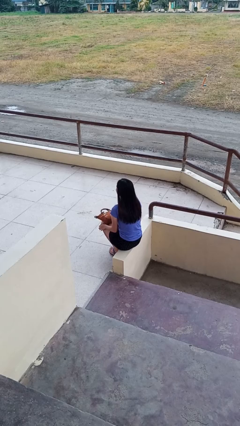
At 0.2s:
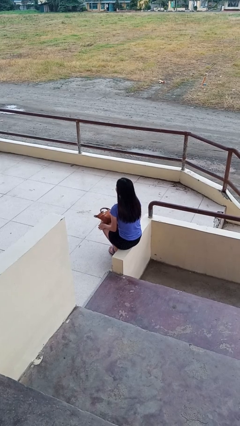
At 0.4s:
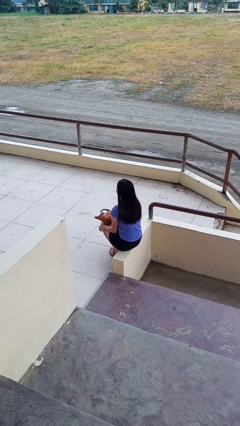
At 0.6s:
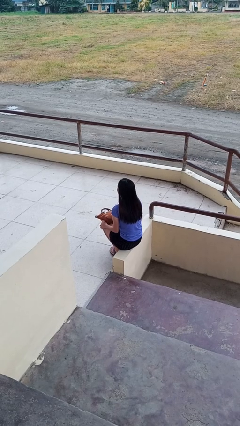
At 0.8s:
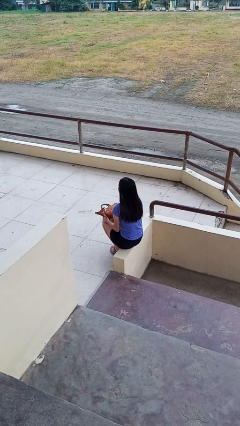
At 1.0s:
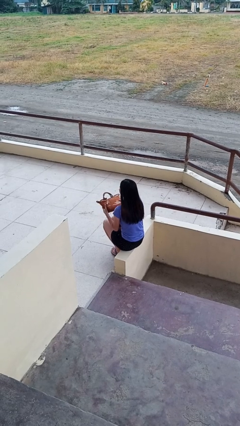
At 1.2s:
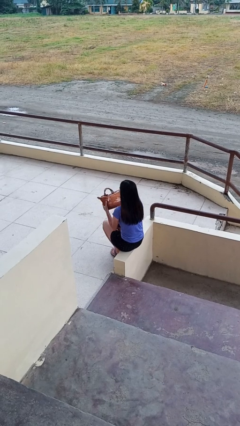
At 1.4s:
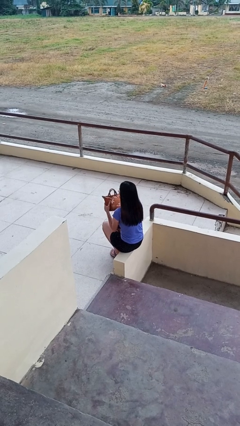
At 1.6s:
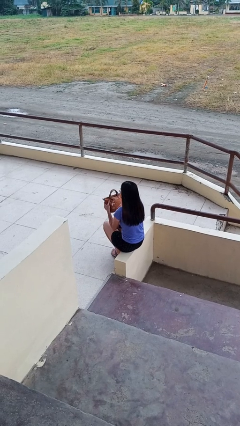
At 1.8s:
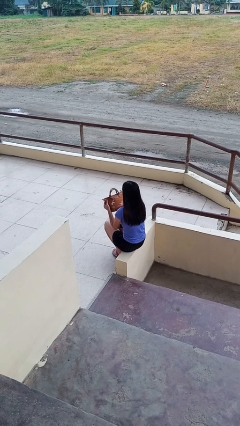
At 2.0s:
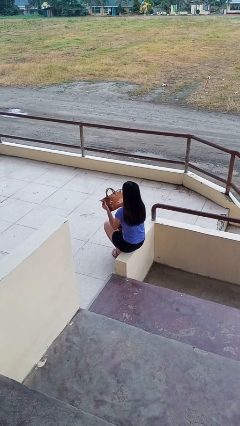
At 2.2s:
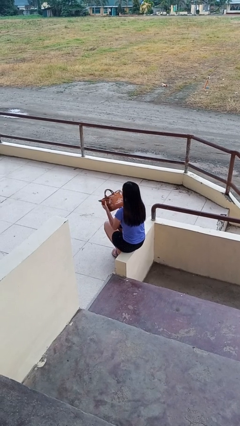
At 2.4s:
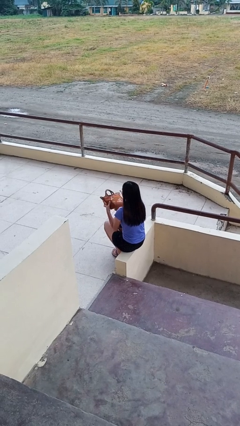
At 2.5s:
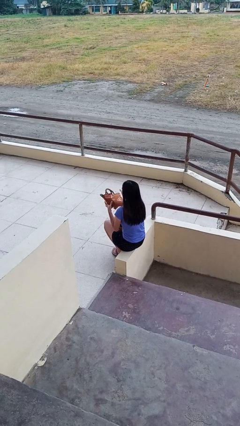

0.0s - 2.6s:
person taps object with finger

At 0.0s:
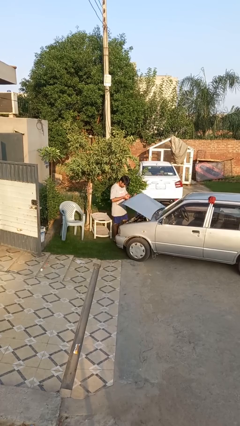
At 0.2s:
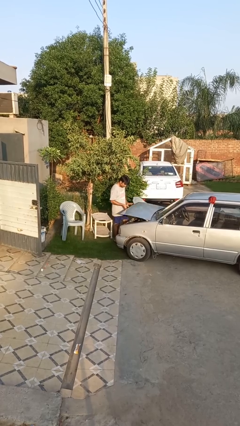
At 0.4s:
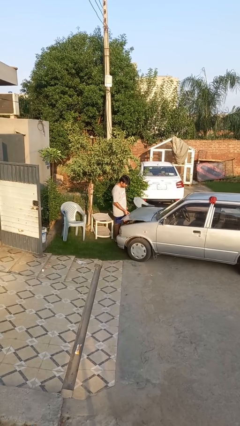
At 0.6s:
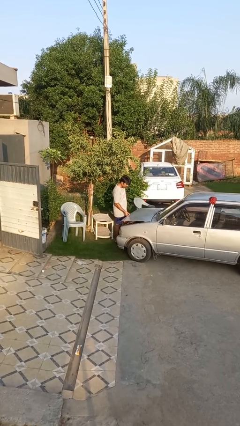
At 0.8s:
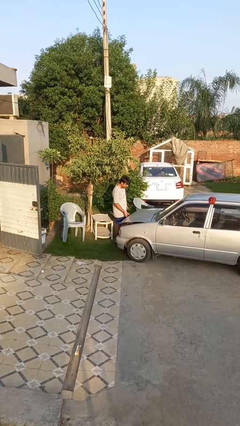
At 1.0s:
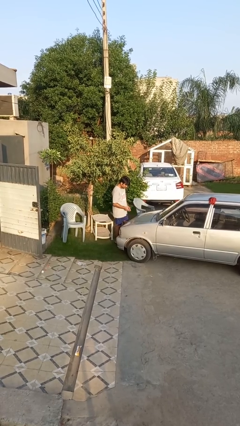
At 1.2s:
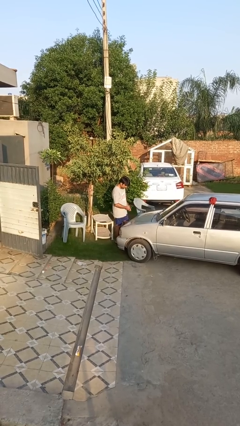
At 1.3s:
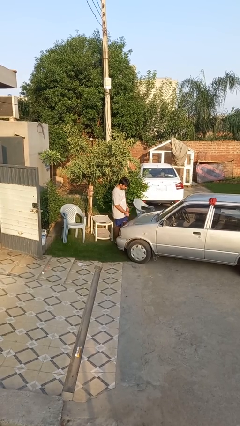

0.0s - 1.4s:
person closes car hood

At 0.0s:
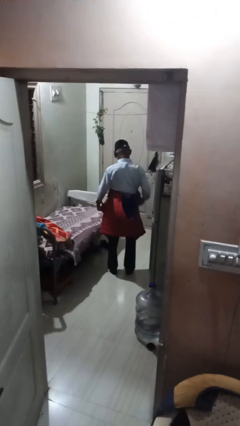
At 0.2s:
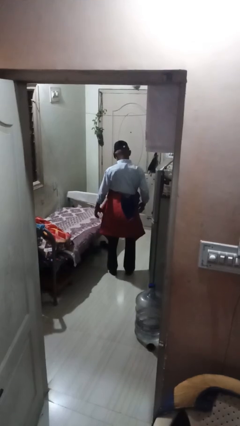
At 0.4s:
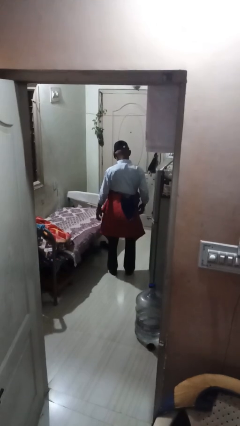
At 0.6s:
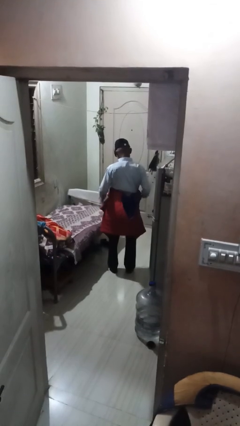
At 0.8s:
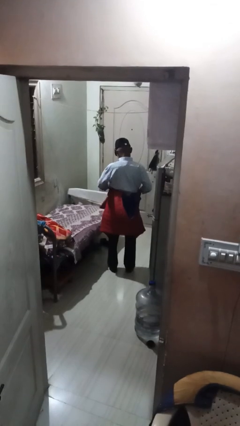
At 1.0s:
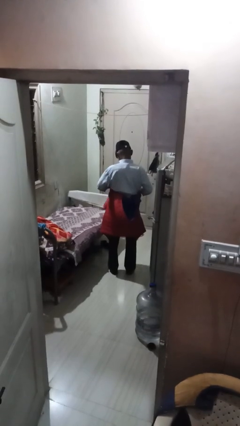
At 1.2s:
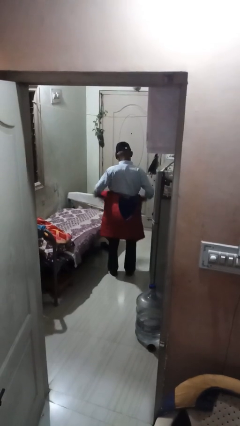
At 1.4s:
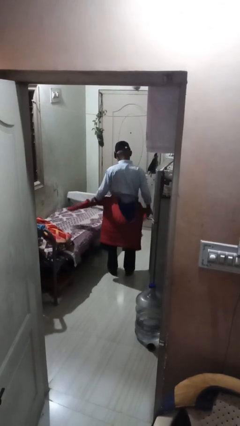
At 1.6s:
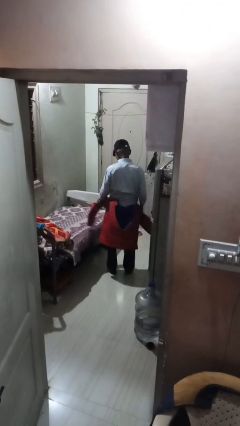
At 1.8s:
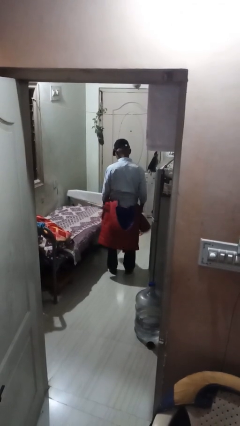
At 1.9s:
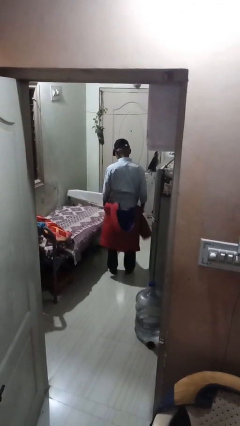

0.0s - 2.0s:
person unties jacket around waist

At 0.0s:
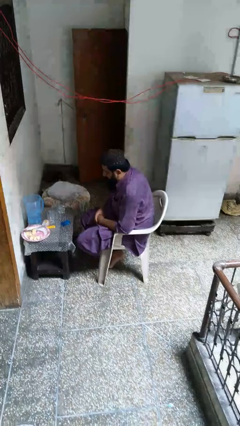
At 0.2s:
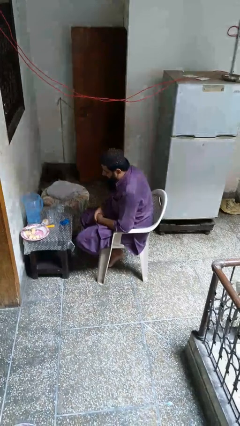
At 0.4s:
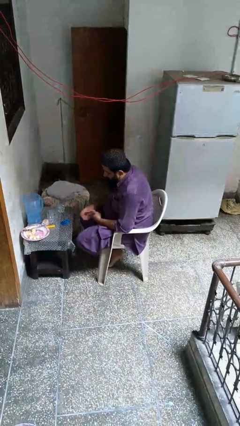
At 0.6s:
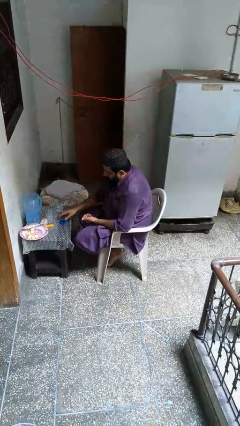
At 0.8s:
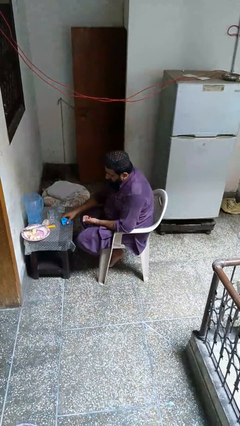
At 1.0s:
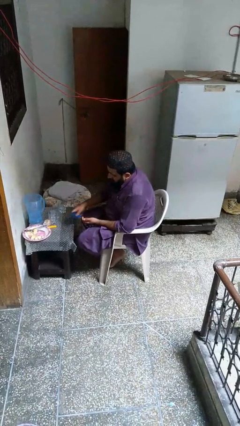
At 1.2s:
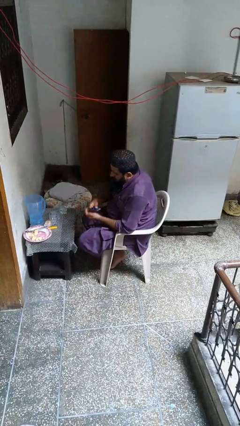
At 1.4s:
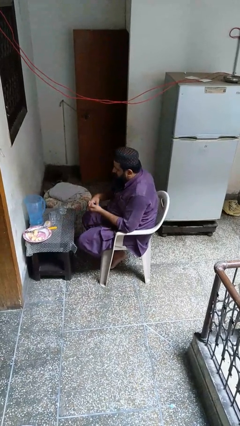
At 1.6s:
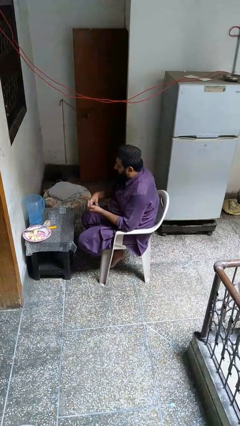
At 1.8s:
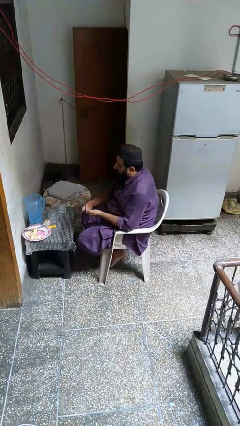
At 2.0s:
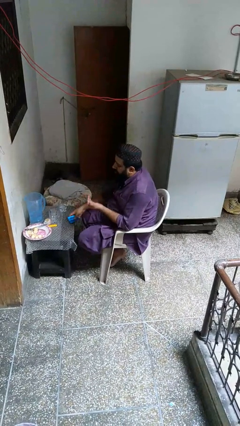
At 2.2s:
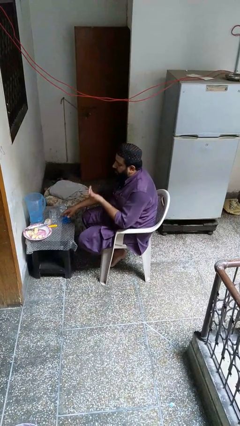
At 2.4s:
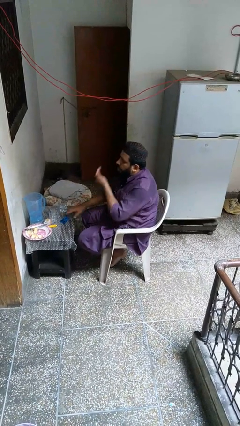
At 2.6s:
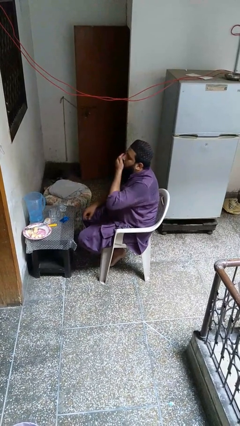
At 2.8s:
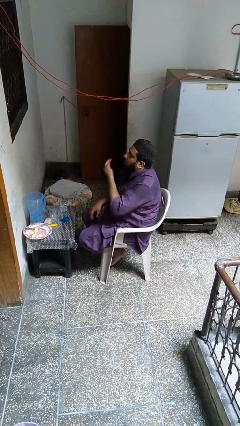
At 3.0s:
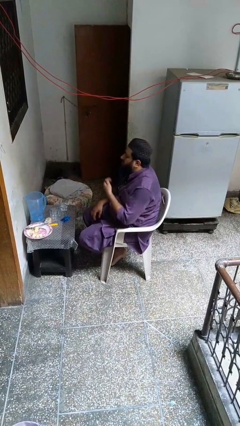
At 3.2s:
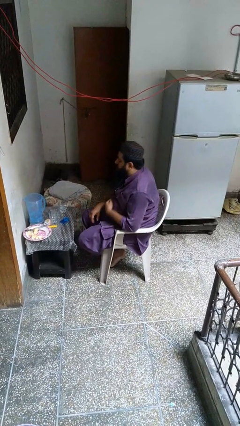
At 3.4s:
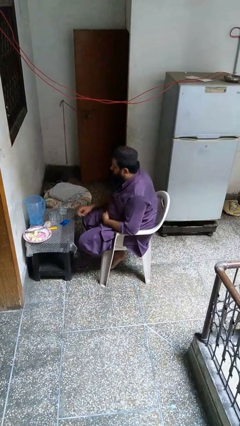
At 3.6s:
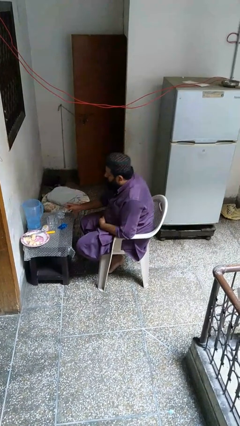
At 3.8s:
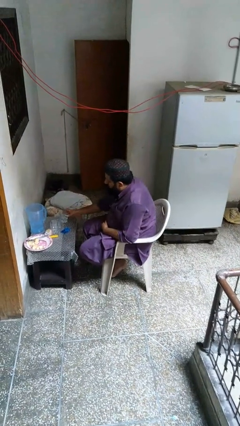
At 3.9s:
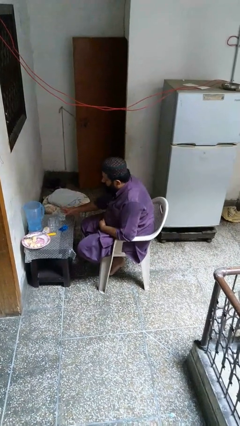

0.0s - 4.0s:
person takes medicine pills

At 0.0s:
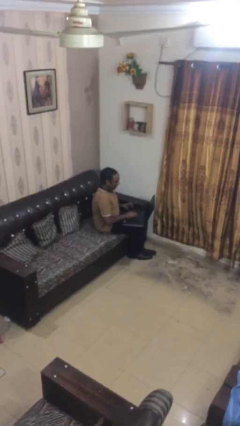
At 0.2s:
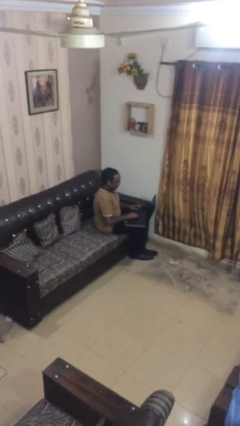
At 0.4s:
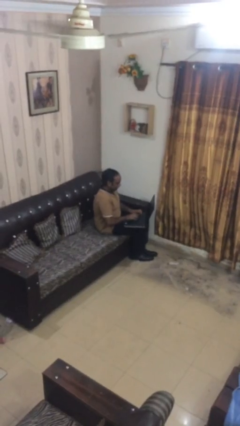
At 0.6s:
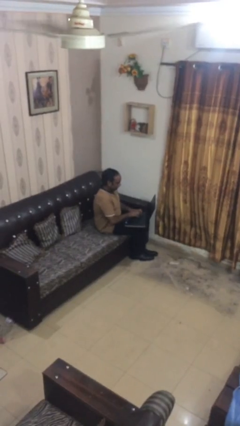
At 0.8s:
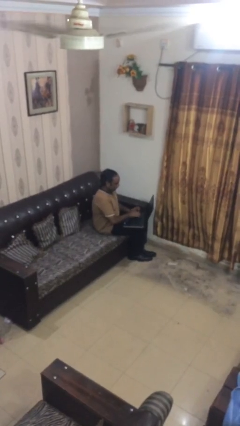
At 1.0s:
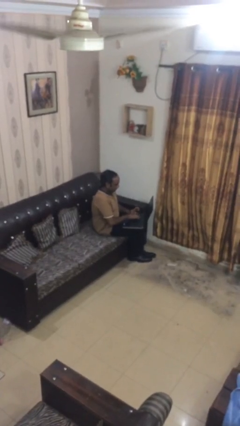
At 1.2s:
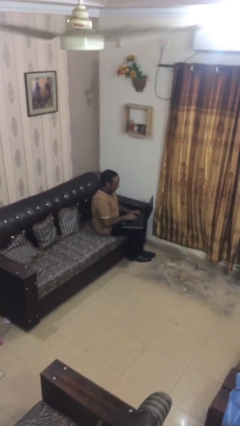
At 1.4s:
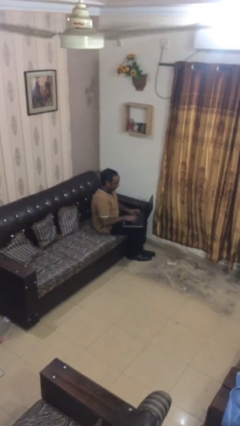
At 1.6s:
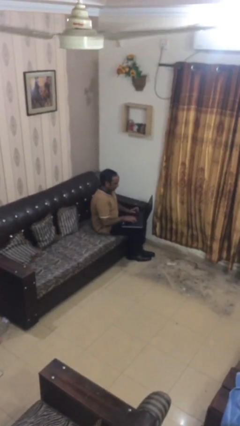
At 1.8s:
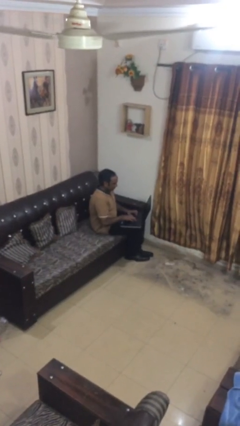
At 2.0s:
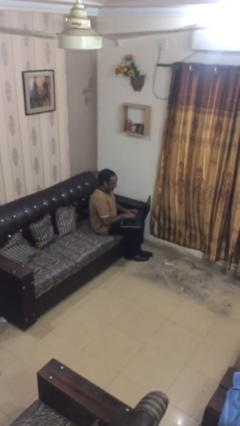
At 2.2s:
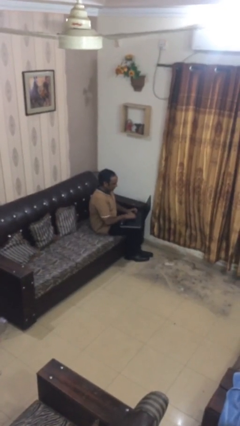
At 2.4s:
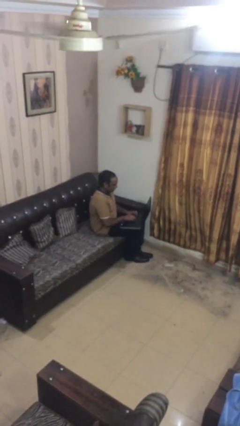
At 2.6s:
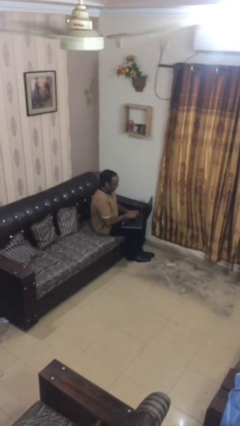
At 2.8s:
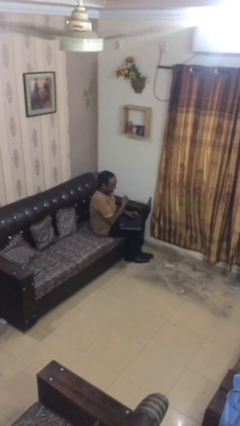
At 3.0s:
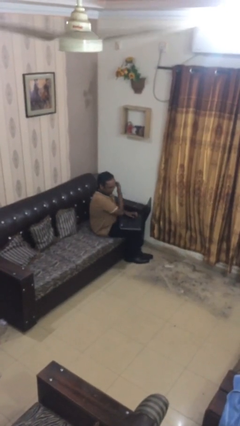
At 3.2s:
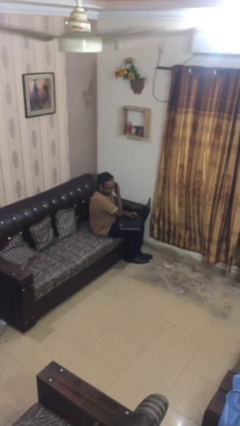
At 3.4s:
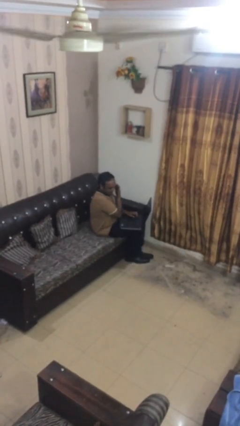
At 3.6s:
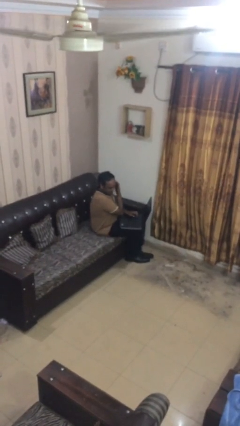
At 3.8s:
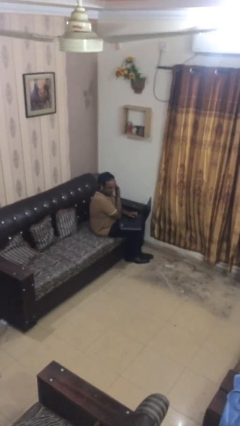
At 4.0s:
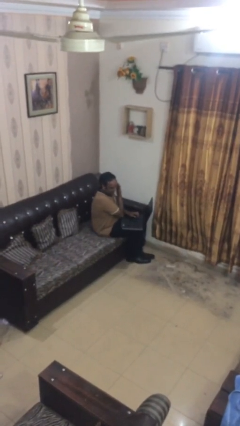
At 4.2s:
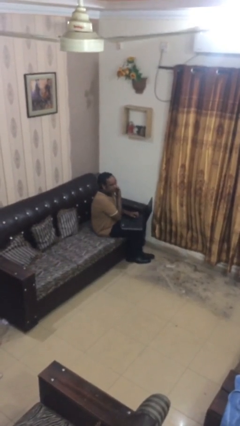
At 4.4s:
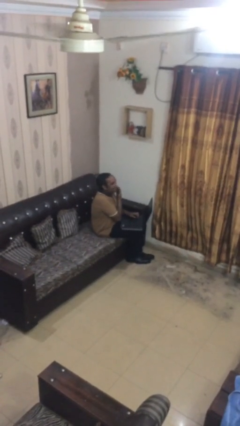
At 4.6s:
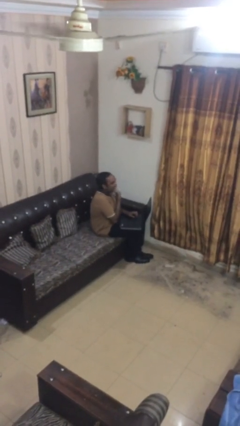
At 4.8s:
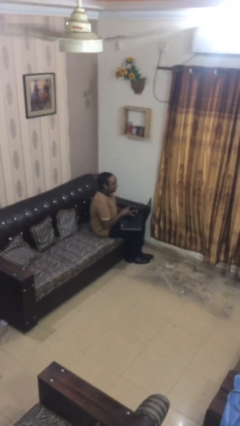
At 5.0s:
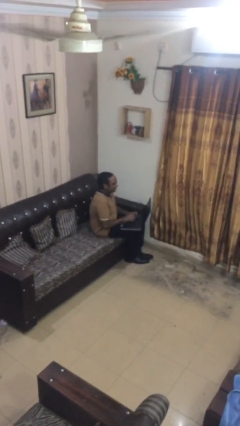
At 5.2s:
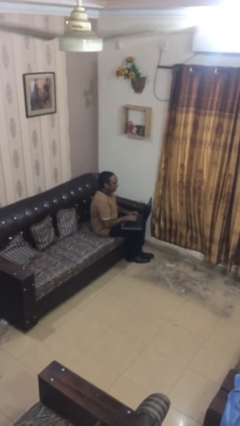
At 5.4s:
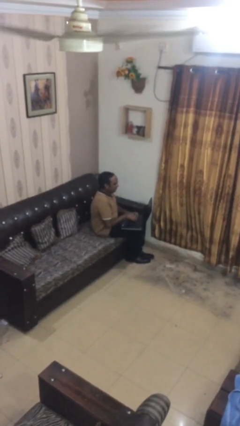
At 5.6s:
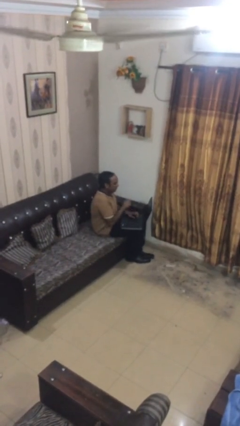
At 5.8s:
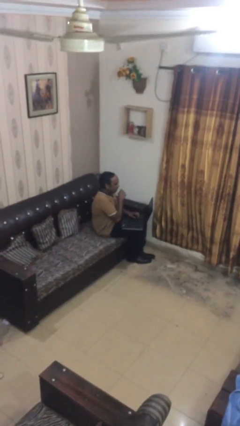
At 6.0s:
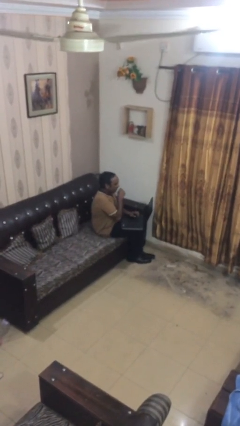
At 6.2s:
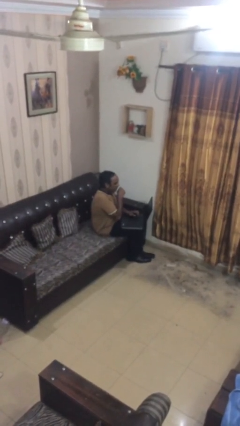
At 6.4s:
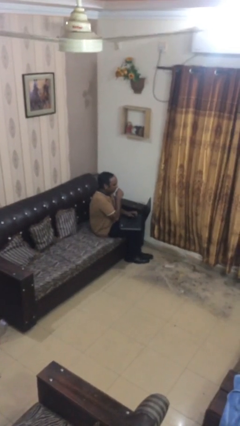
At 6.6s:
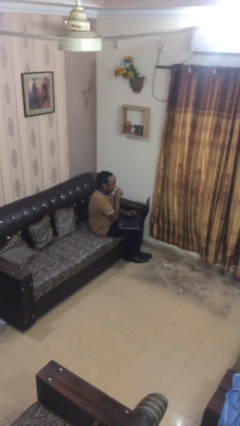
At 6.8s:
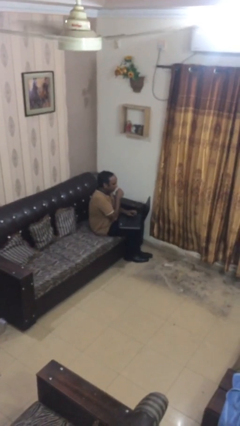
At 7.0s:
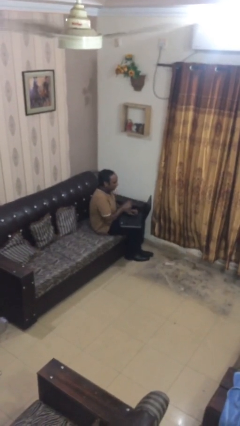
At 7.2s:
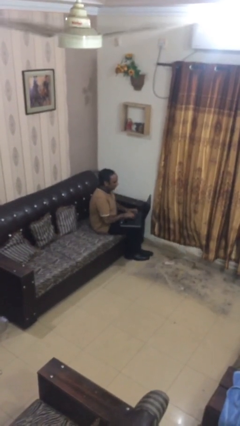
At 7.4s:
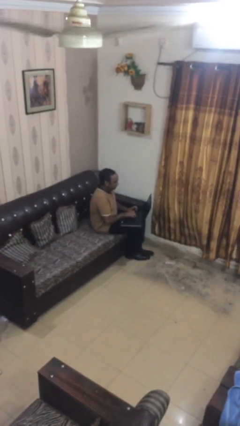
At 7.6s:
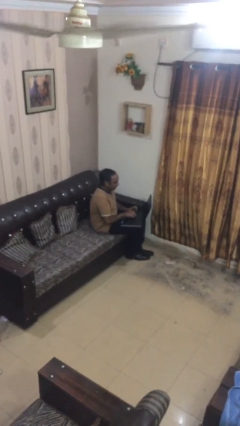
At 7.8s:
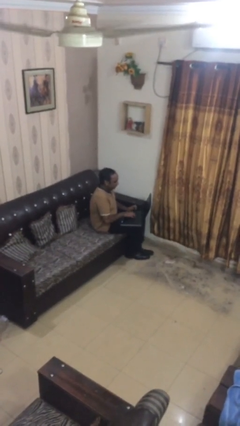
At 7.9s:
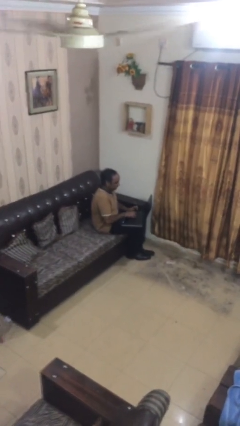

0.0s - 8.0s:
person interacts with laptop
